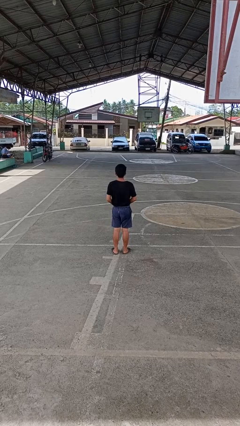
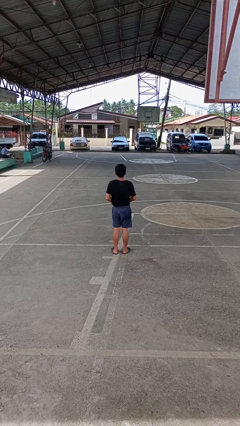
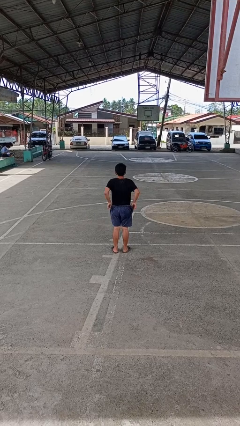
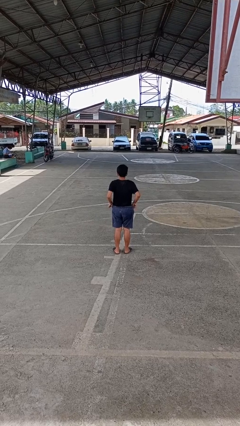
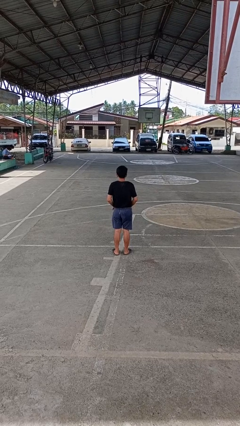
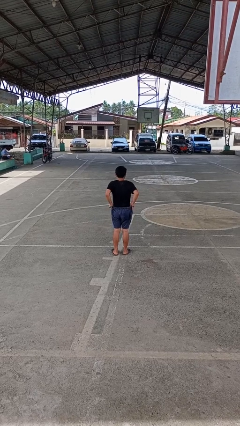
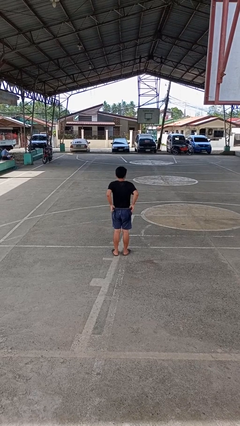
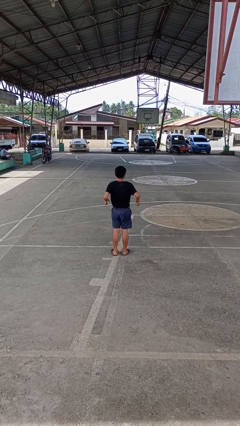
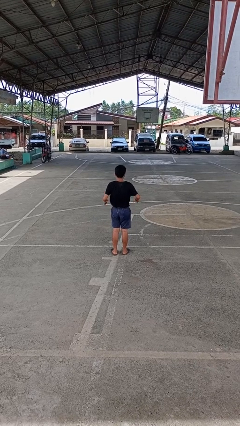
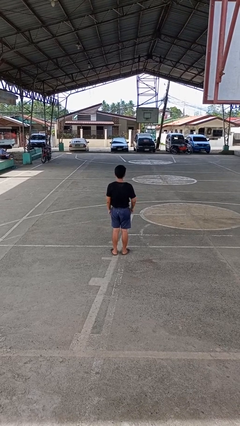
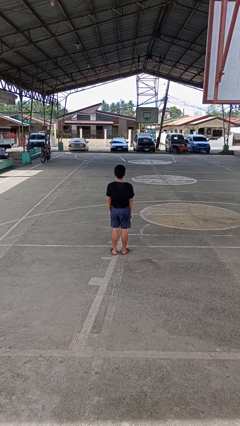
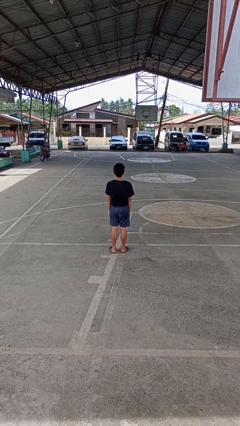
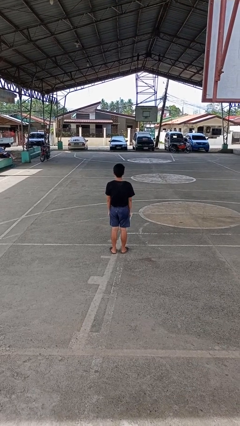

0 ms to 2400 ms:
person hikes up pants

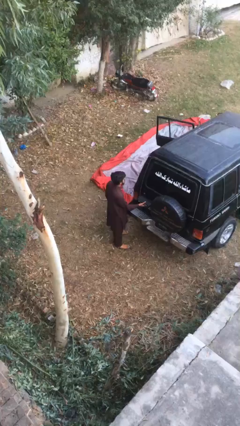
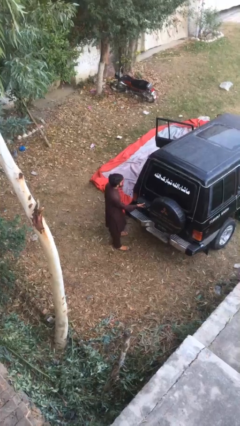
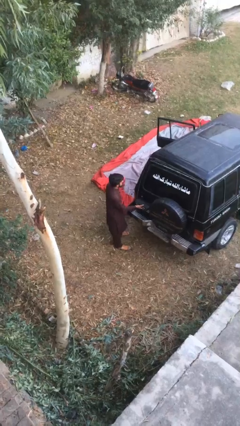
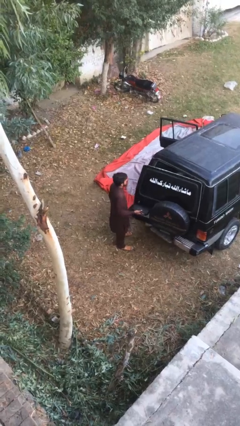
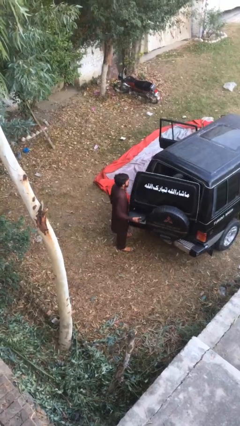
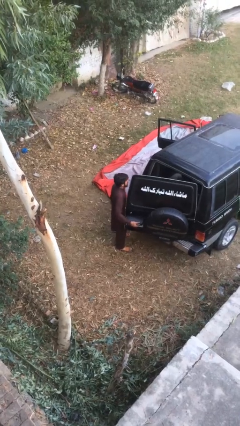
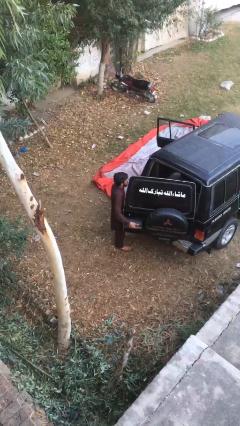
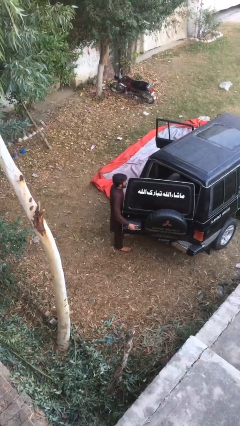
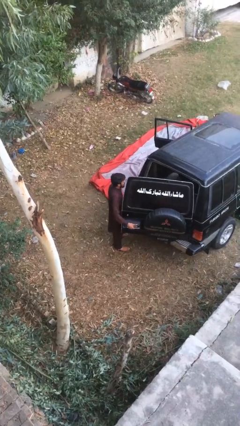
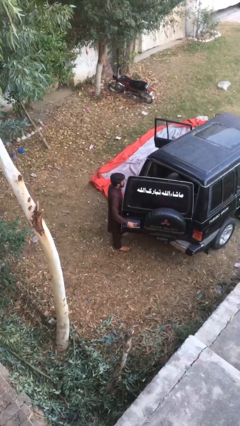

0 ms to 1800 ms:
person opens car trunk

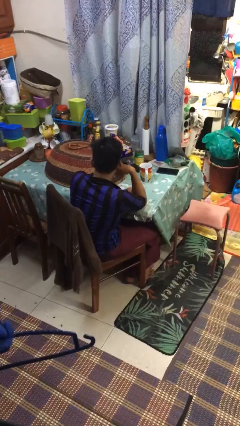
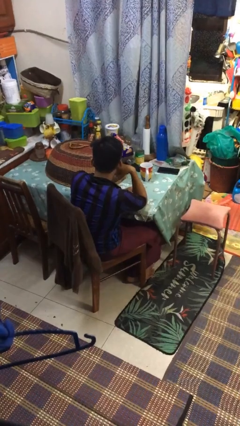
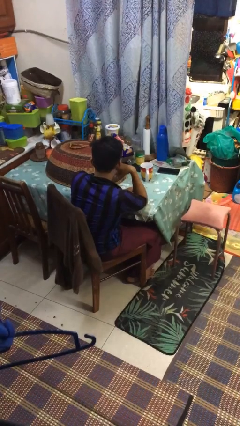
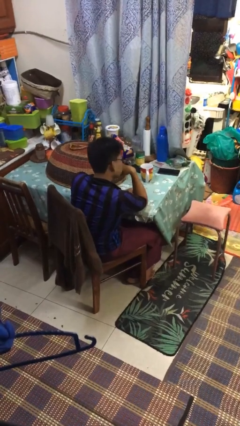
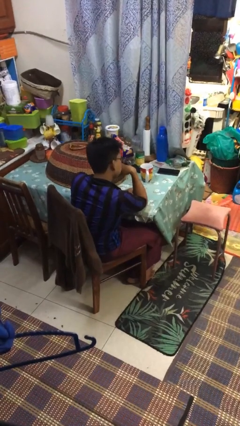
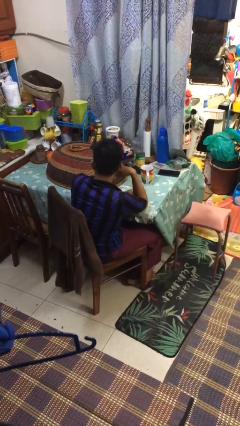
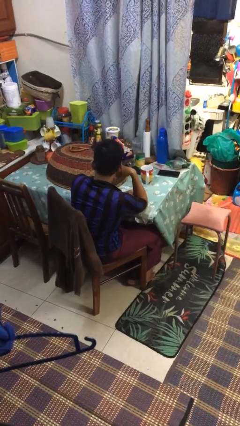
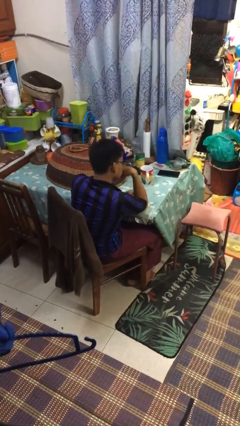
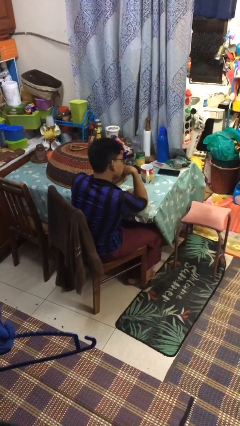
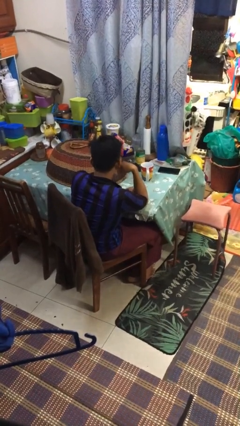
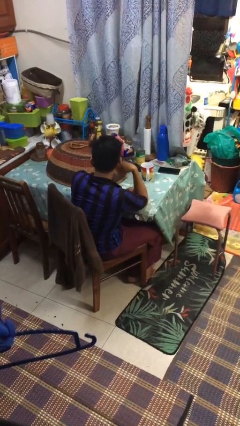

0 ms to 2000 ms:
person shakes head

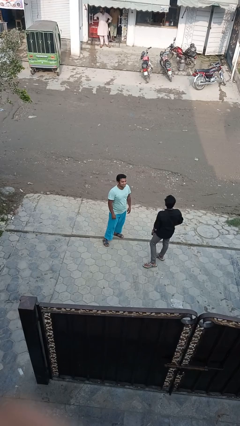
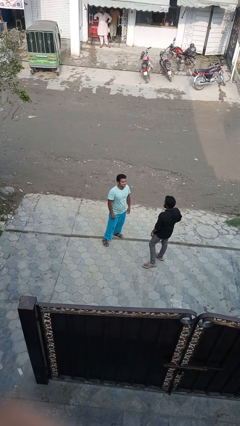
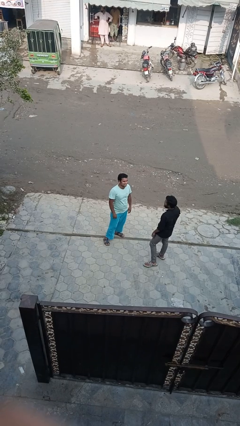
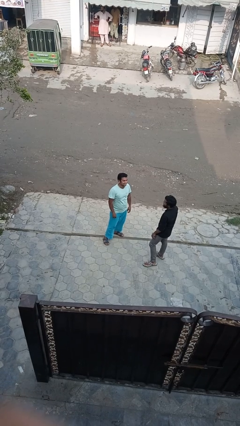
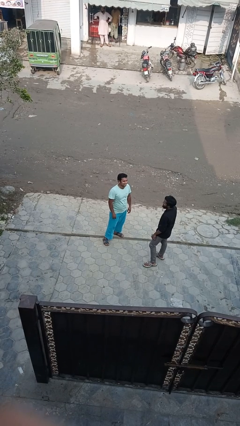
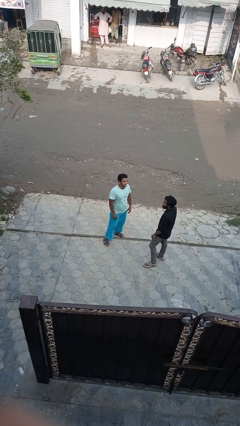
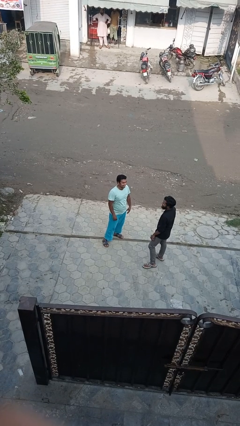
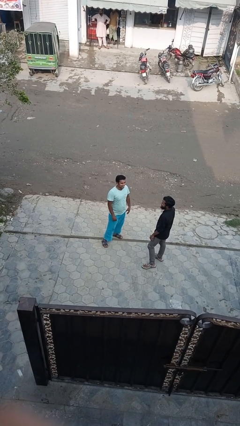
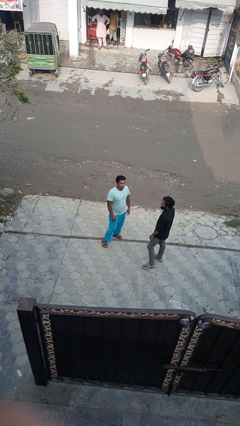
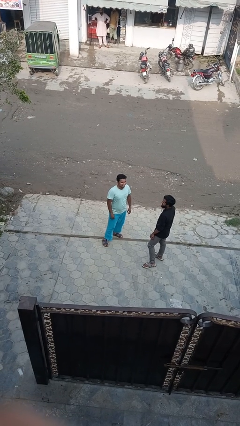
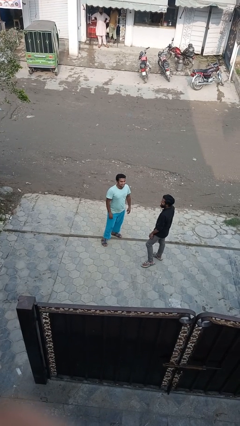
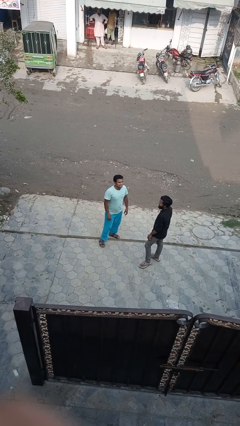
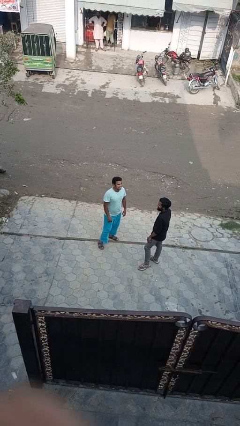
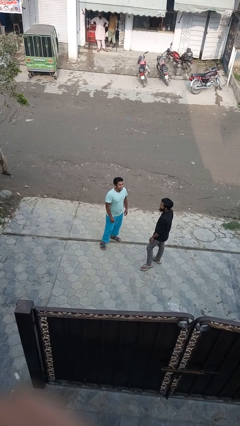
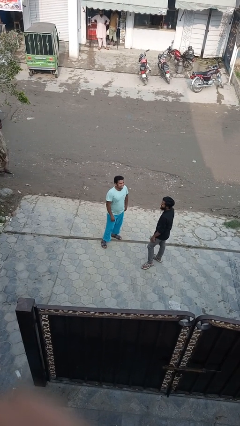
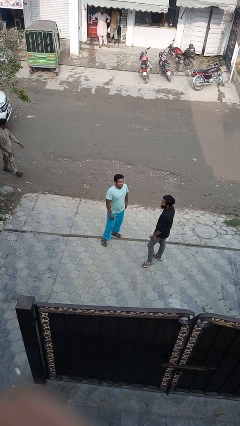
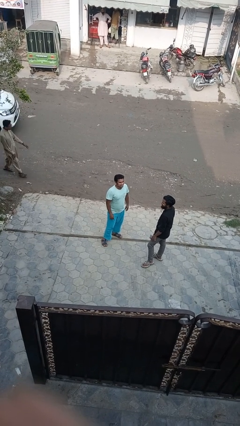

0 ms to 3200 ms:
person laughs with person

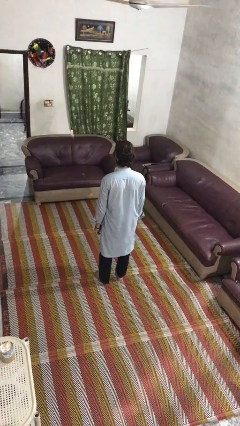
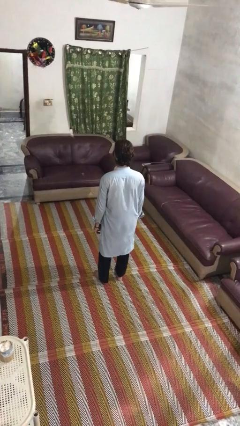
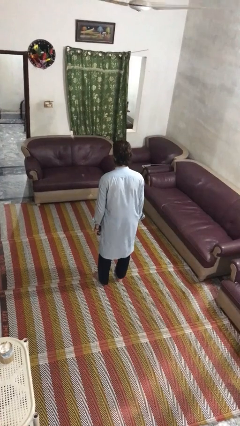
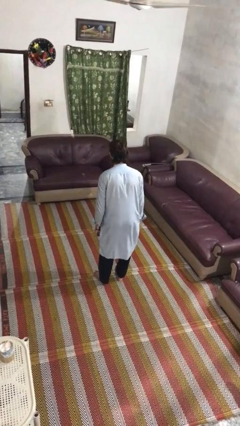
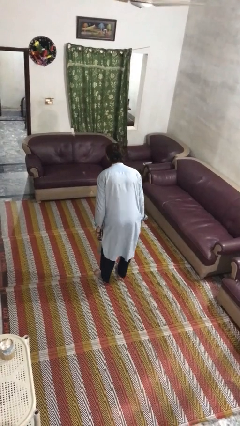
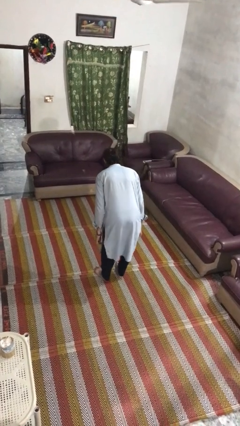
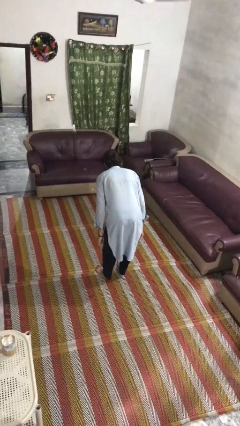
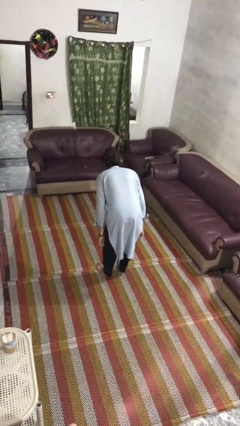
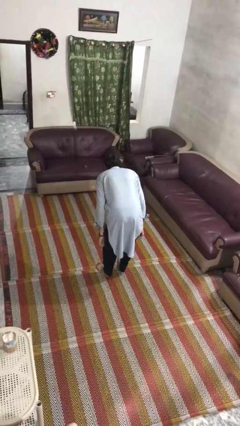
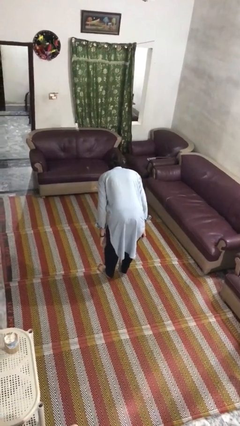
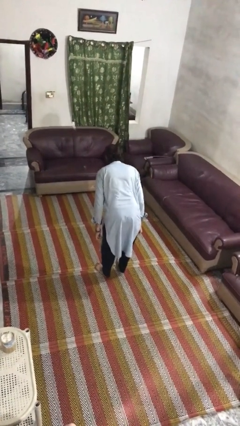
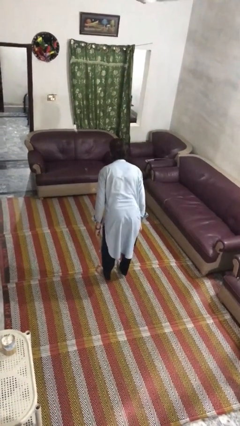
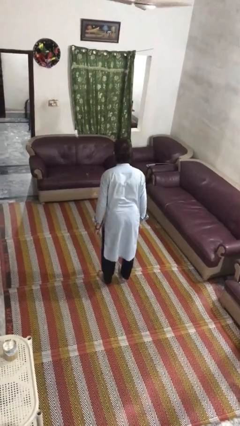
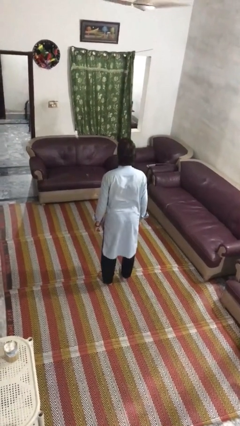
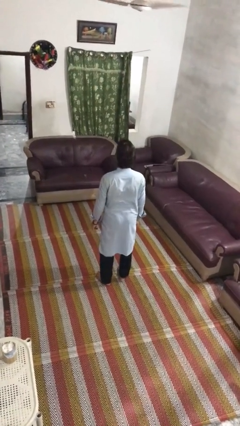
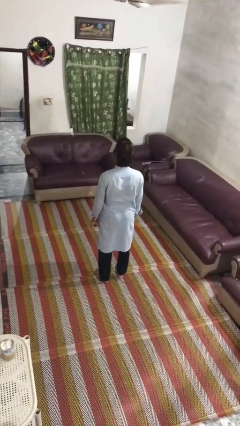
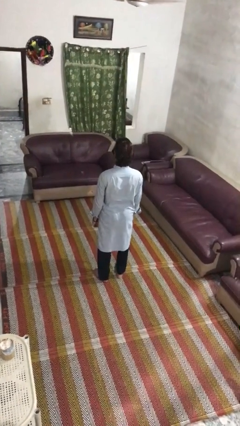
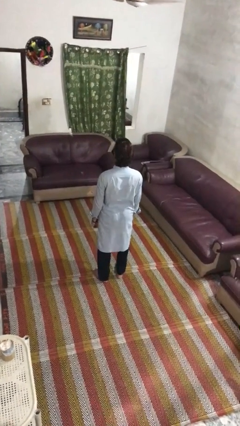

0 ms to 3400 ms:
person bows

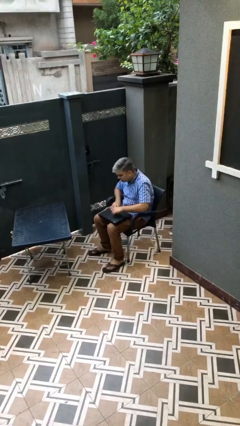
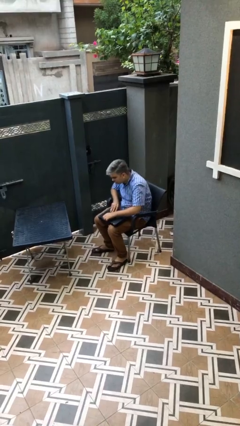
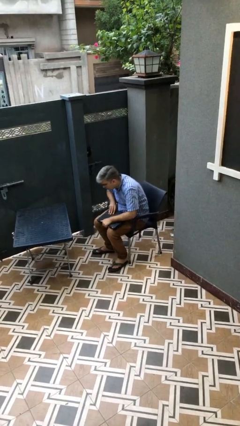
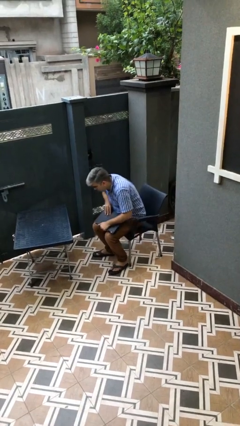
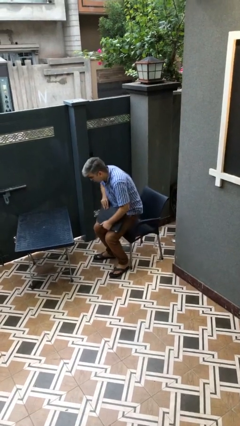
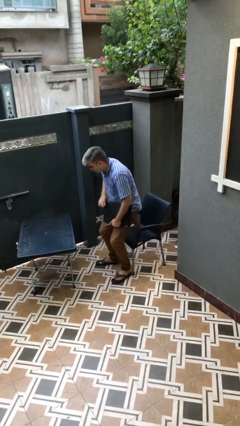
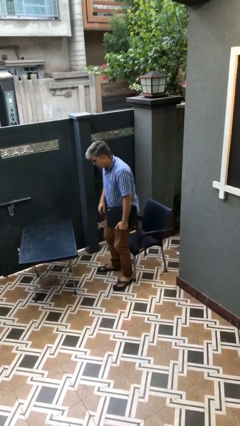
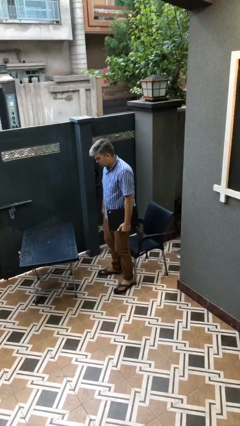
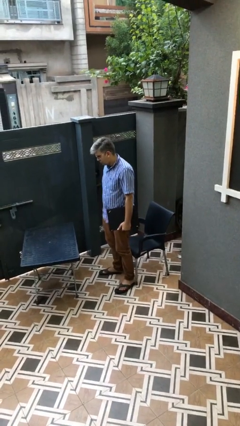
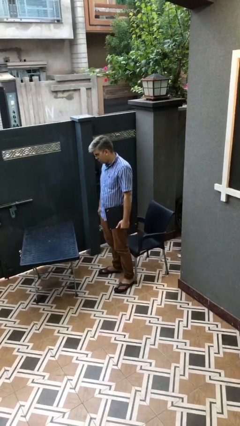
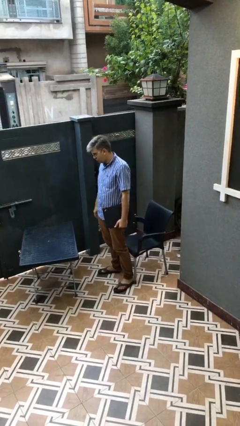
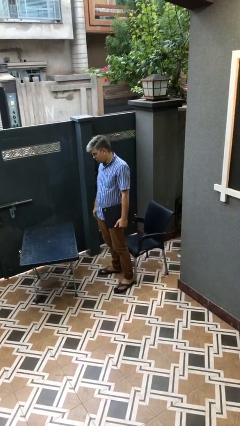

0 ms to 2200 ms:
person stands up

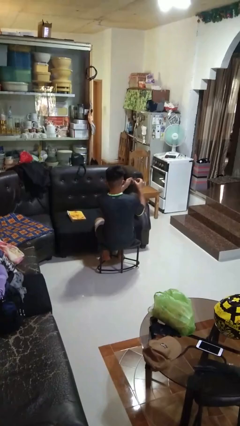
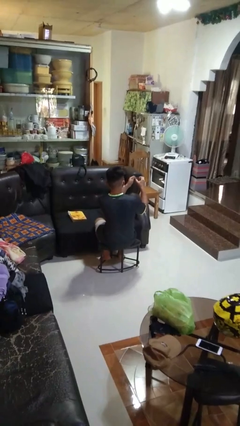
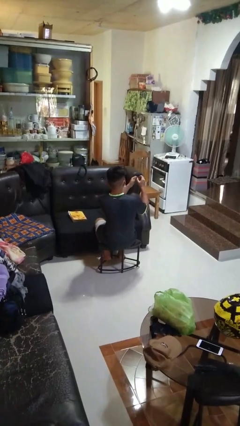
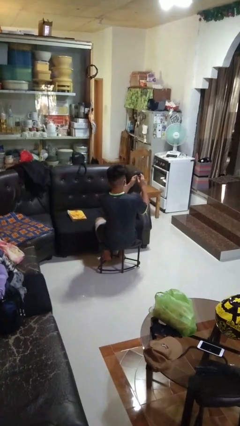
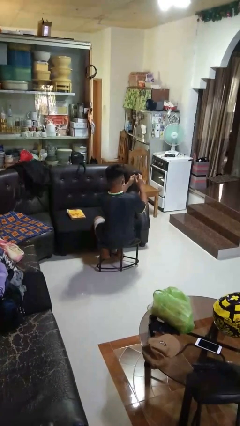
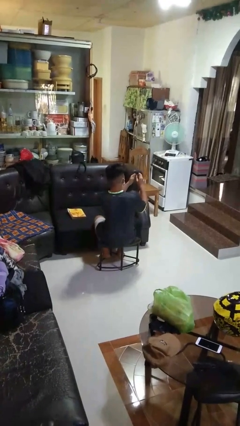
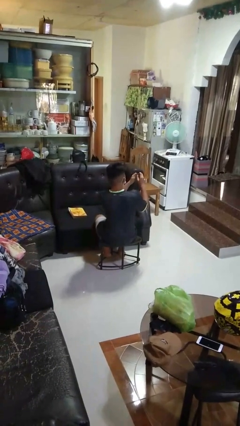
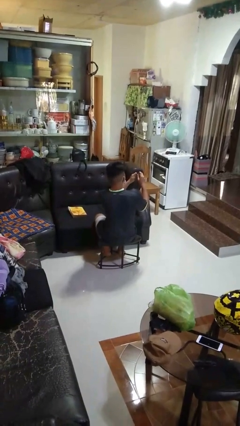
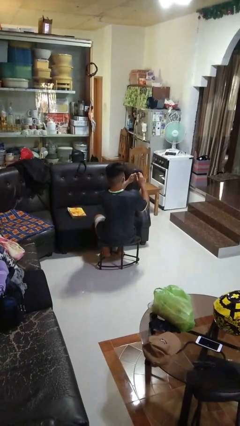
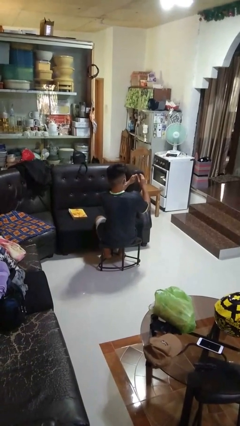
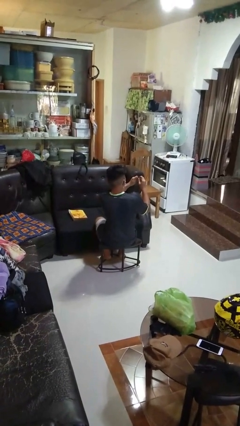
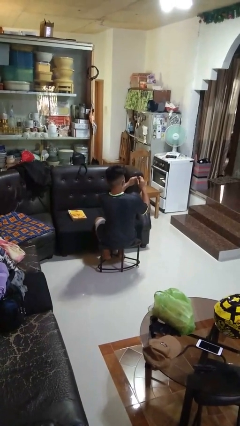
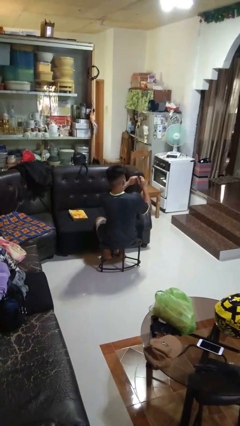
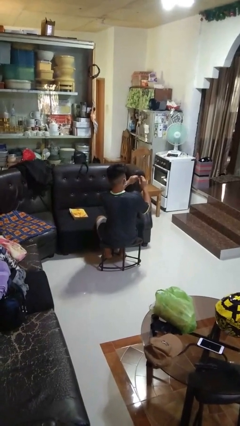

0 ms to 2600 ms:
person clips fingernails
